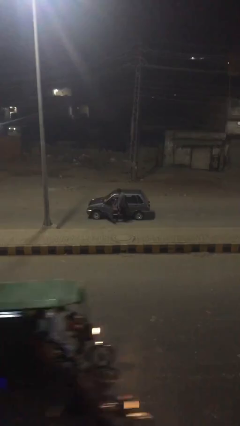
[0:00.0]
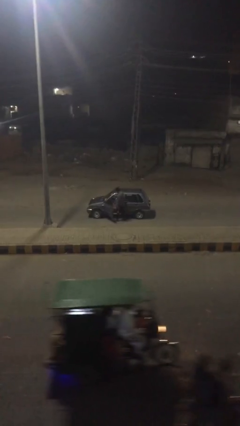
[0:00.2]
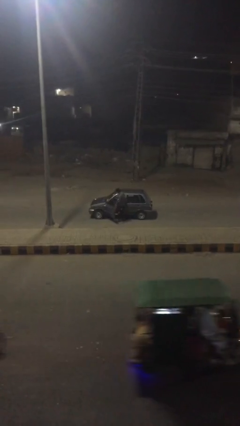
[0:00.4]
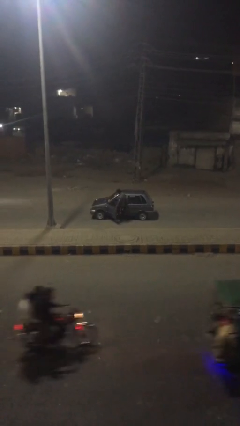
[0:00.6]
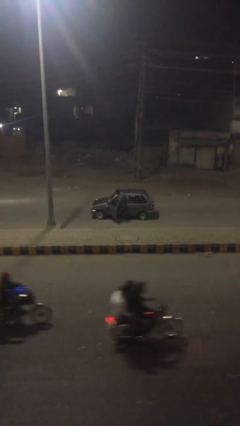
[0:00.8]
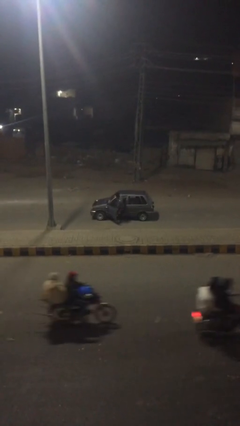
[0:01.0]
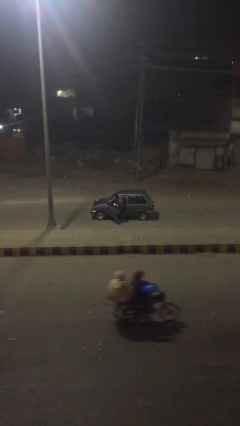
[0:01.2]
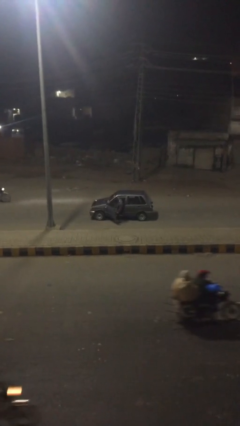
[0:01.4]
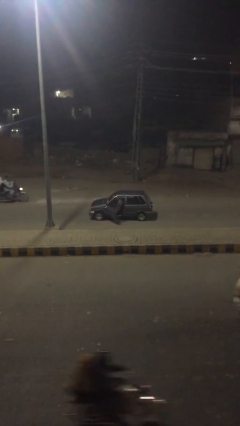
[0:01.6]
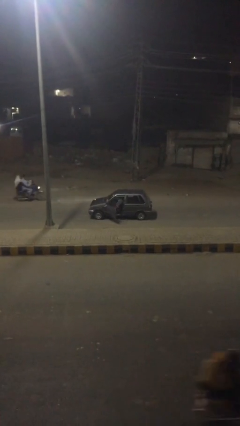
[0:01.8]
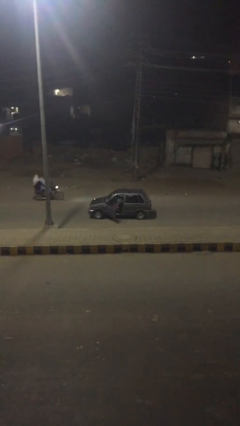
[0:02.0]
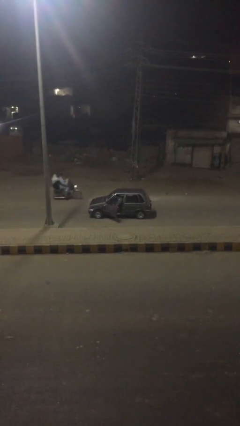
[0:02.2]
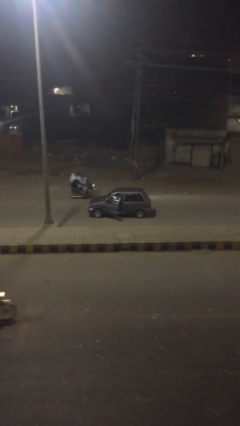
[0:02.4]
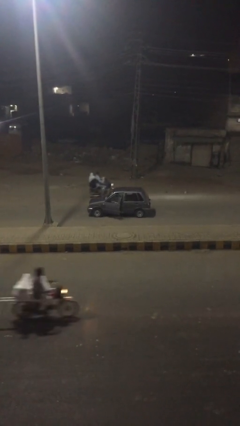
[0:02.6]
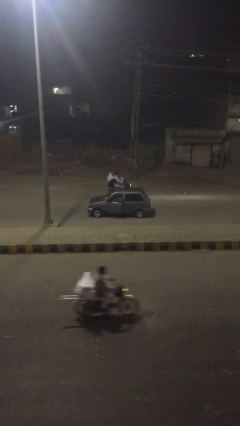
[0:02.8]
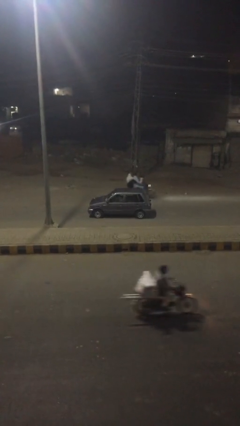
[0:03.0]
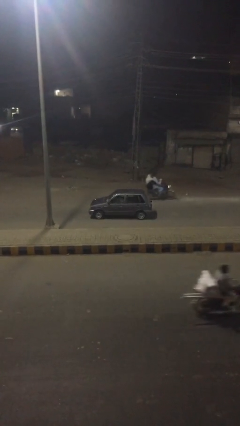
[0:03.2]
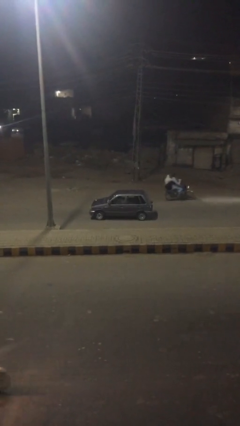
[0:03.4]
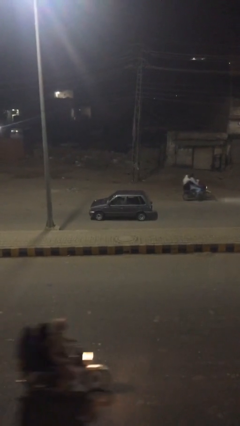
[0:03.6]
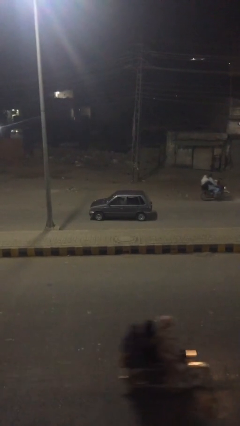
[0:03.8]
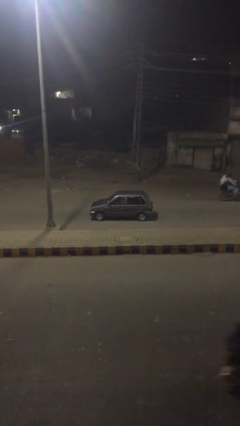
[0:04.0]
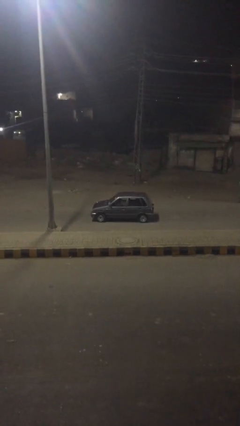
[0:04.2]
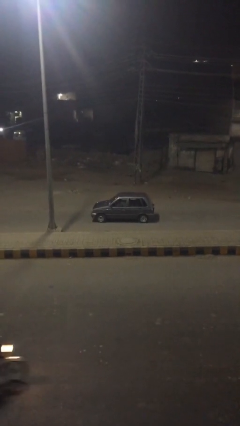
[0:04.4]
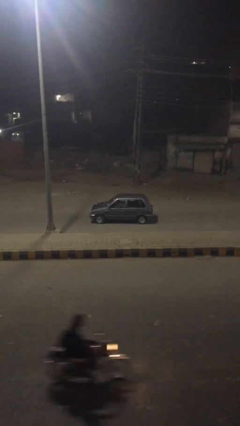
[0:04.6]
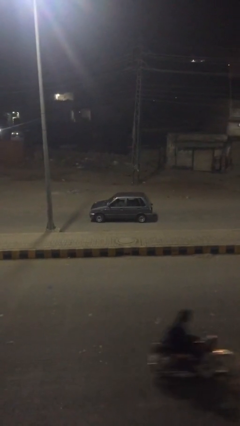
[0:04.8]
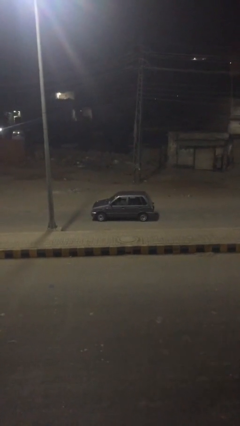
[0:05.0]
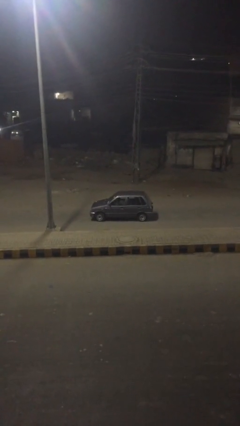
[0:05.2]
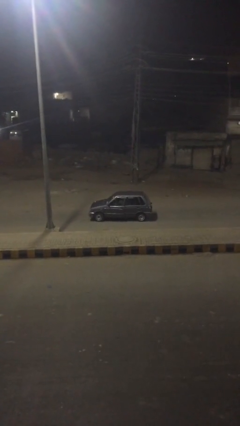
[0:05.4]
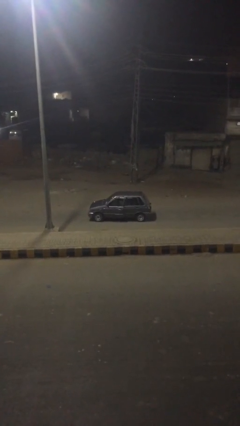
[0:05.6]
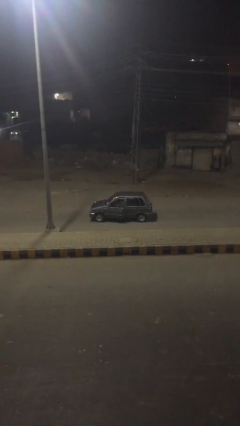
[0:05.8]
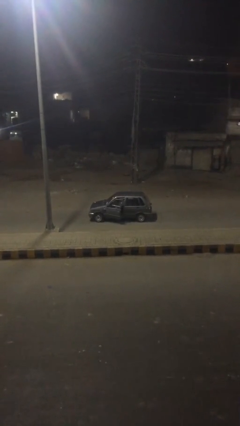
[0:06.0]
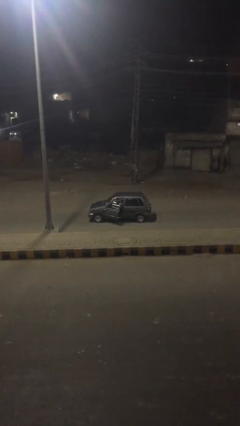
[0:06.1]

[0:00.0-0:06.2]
person enters car

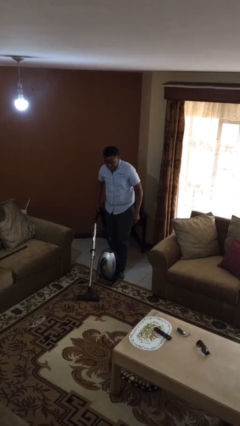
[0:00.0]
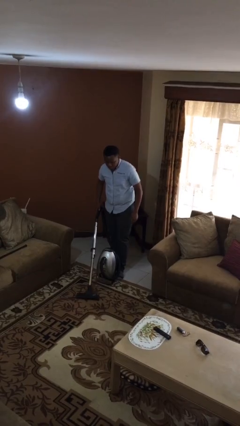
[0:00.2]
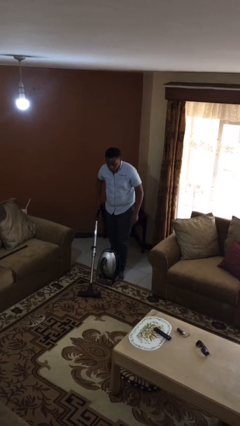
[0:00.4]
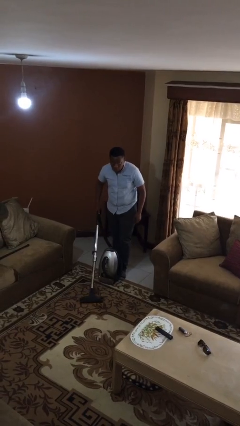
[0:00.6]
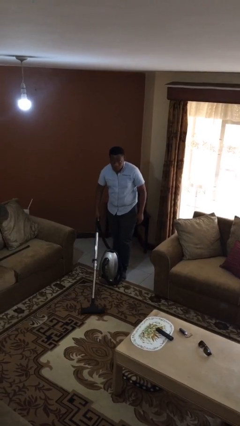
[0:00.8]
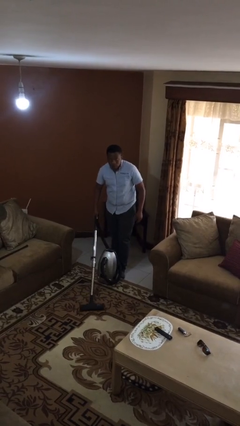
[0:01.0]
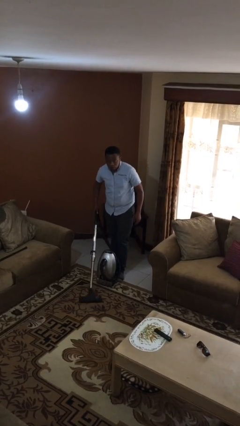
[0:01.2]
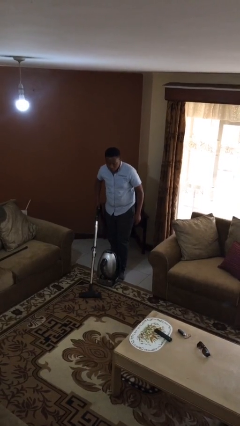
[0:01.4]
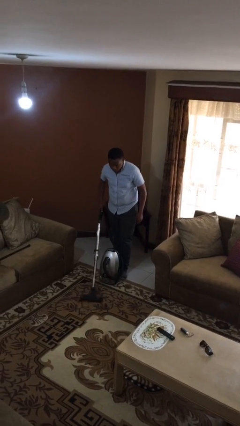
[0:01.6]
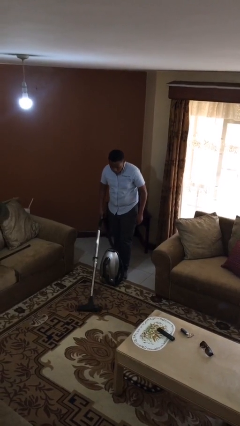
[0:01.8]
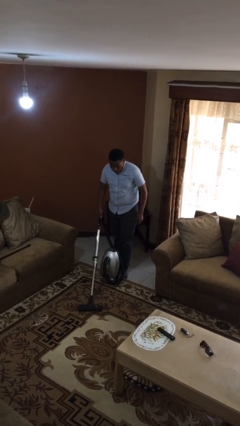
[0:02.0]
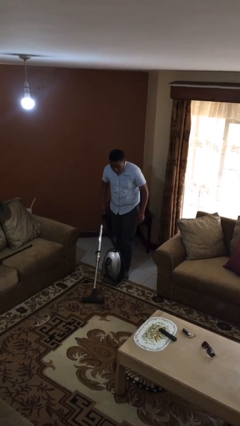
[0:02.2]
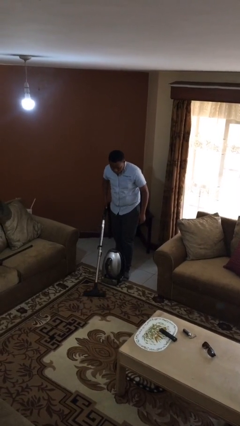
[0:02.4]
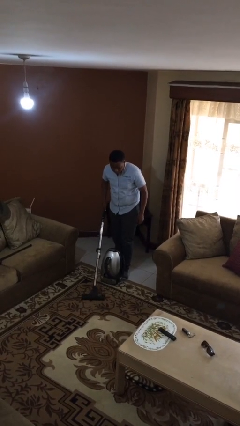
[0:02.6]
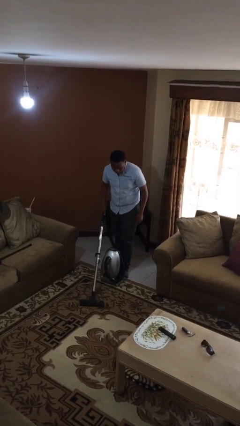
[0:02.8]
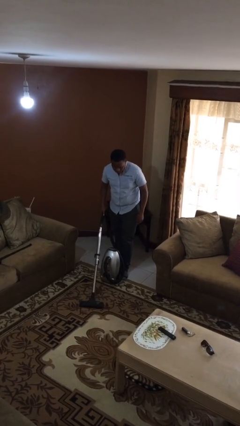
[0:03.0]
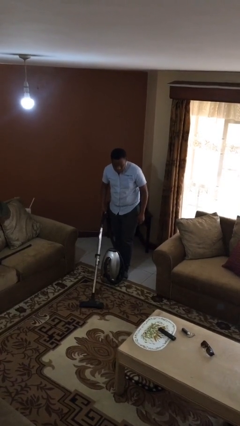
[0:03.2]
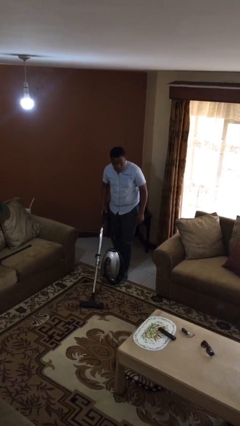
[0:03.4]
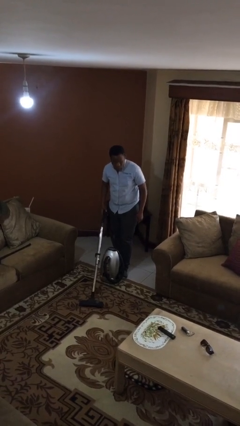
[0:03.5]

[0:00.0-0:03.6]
person vacuums carpet

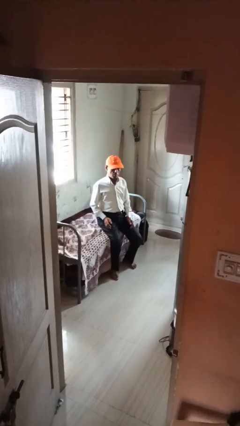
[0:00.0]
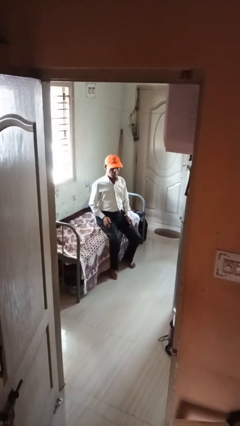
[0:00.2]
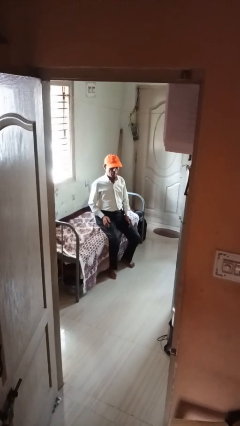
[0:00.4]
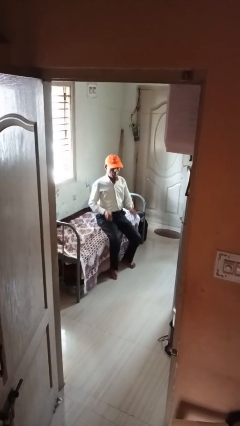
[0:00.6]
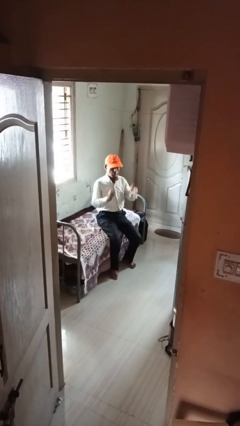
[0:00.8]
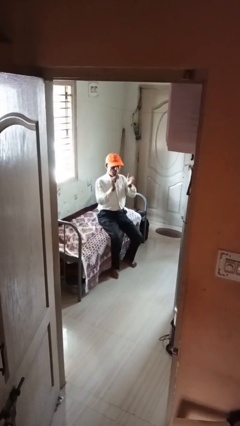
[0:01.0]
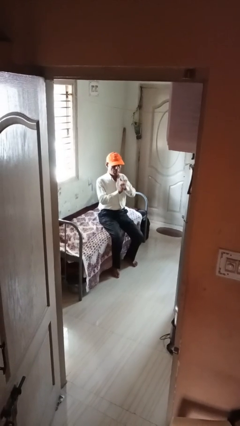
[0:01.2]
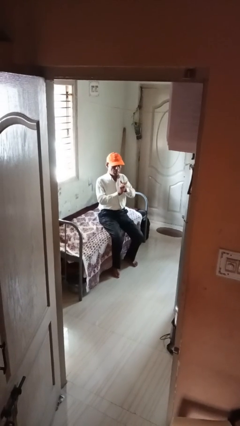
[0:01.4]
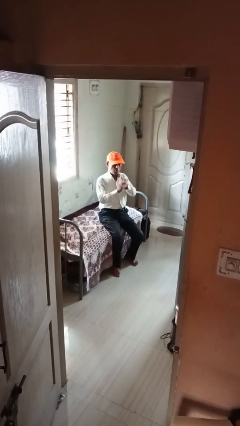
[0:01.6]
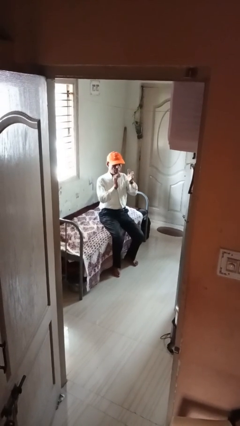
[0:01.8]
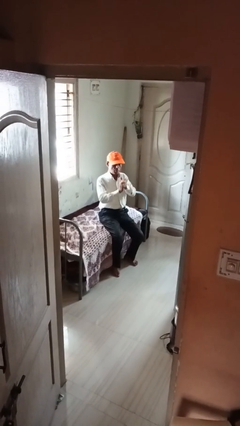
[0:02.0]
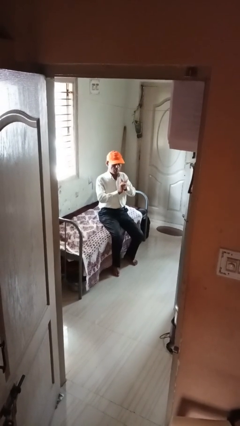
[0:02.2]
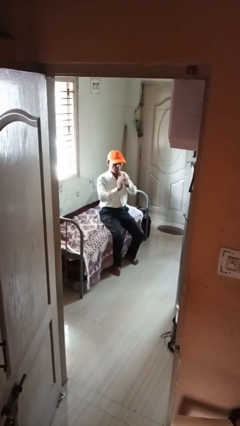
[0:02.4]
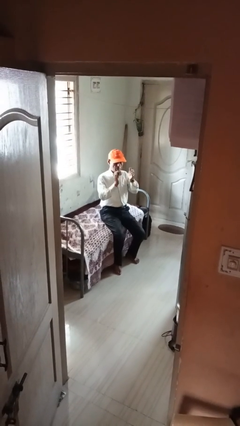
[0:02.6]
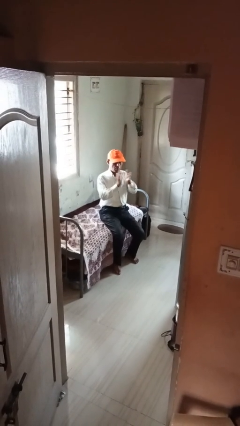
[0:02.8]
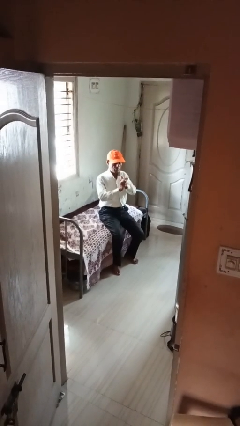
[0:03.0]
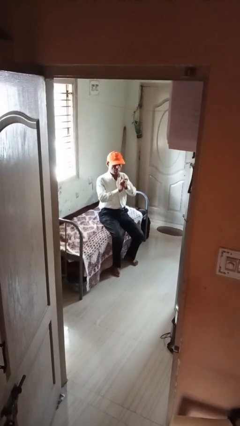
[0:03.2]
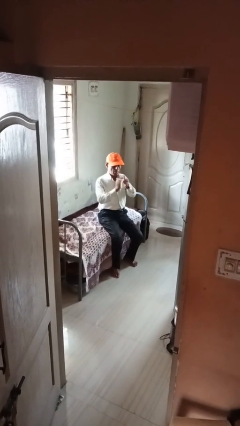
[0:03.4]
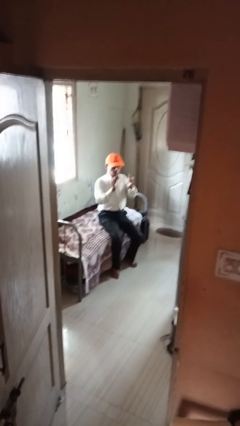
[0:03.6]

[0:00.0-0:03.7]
person claps hands

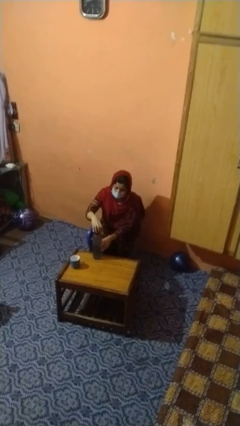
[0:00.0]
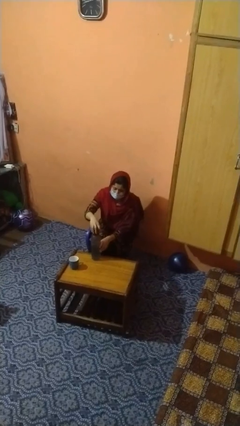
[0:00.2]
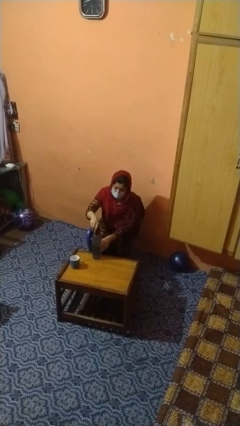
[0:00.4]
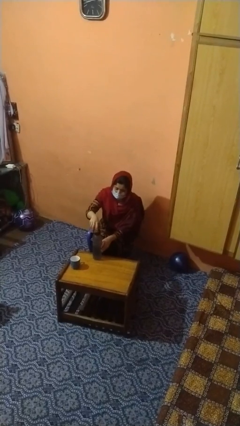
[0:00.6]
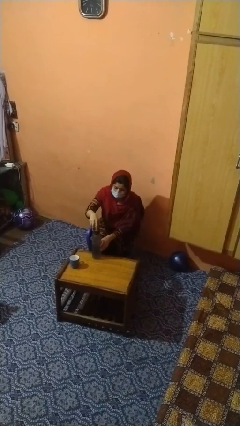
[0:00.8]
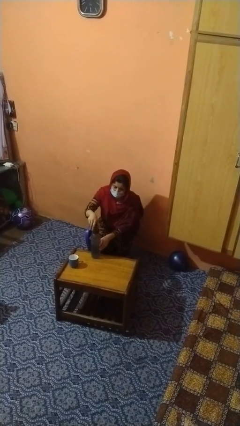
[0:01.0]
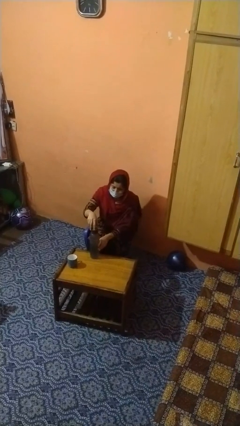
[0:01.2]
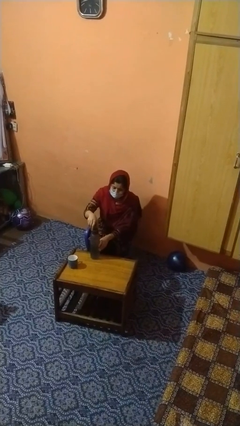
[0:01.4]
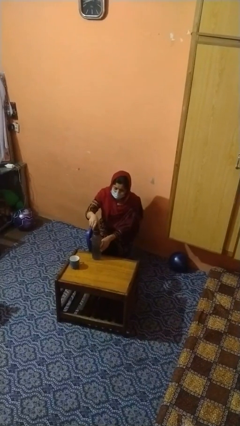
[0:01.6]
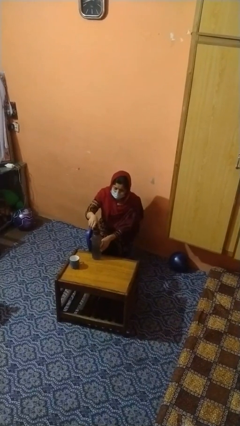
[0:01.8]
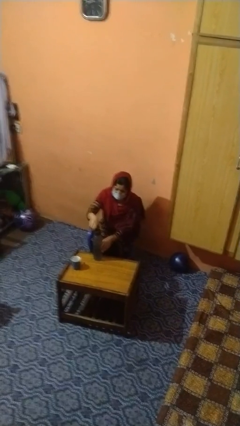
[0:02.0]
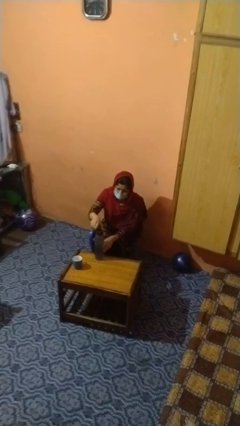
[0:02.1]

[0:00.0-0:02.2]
person screws lid to bottle

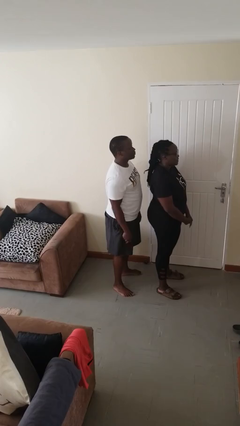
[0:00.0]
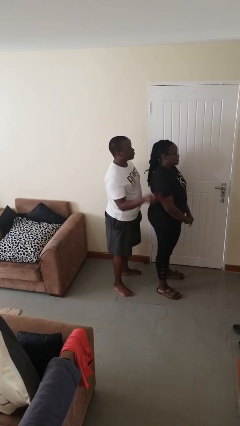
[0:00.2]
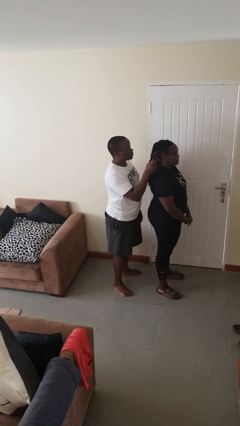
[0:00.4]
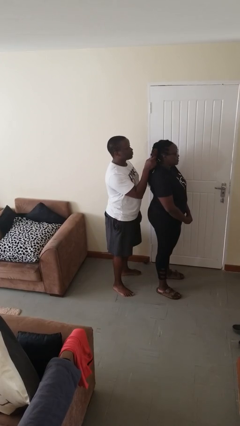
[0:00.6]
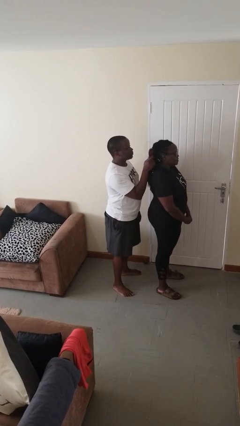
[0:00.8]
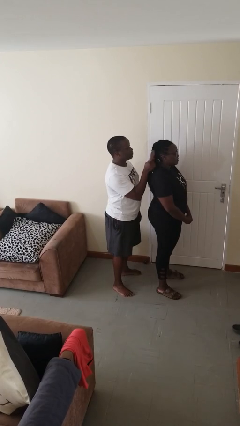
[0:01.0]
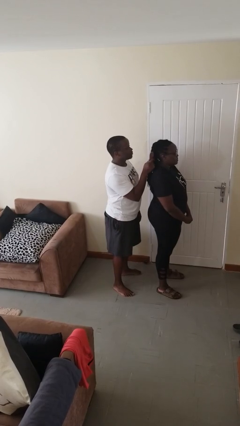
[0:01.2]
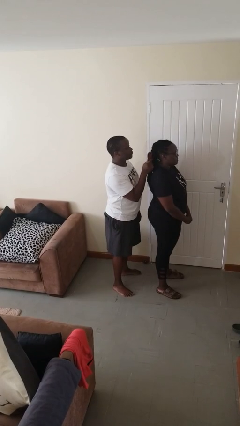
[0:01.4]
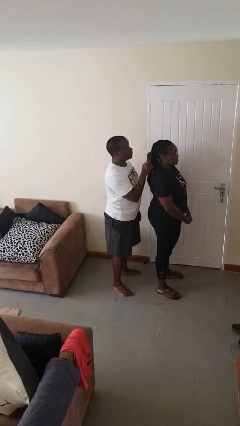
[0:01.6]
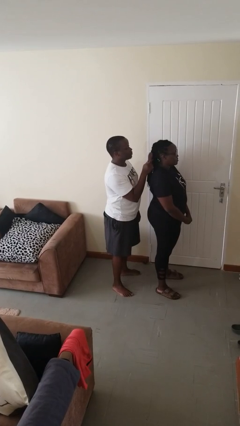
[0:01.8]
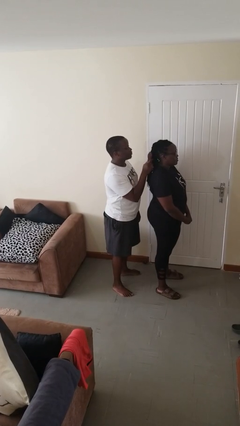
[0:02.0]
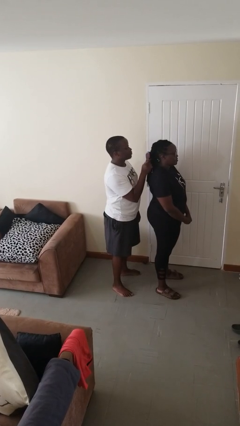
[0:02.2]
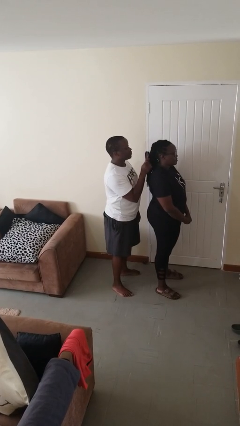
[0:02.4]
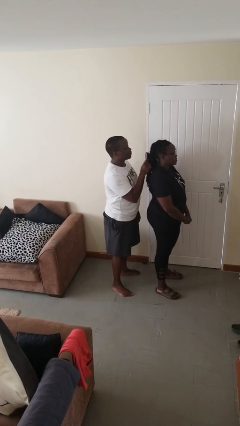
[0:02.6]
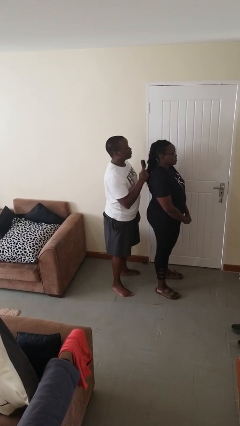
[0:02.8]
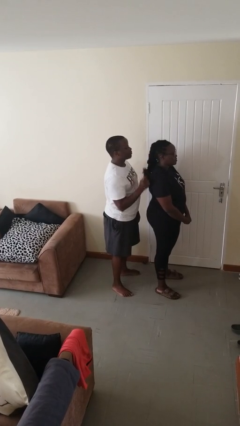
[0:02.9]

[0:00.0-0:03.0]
person brushes hair of person
